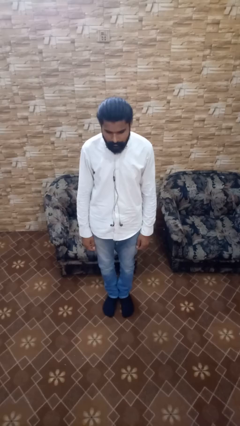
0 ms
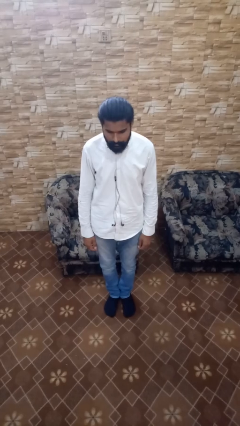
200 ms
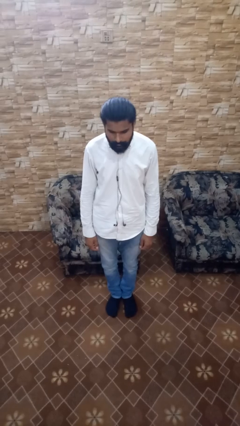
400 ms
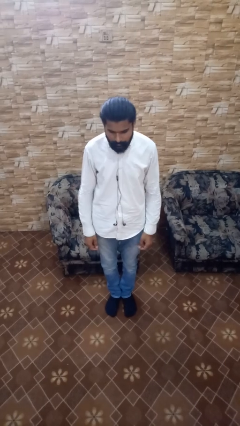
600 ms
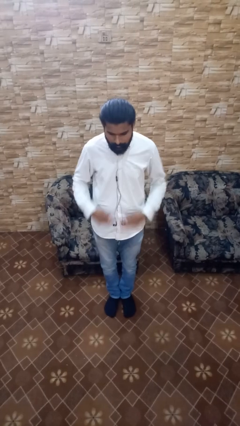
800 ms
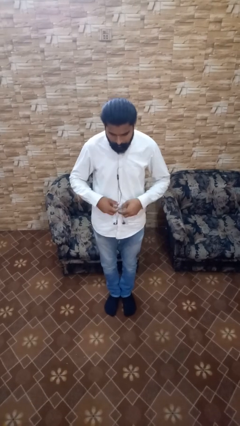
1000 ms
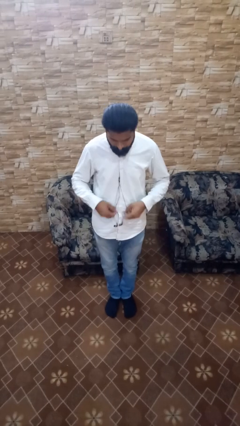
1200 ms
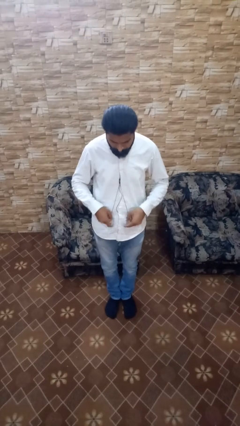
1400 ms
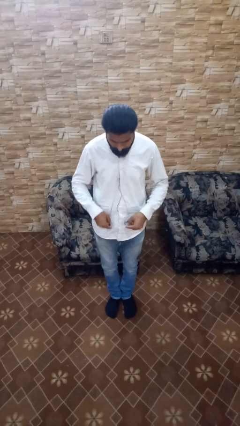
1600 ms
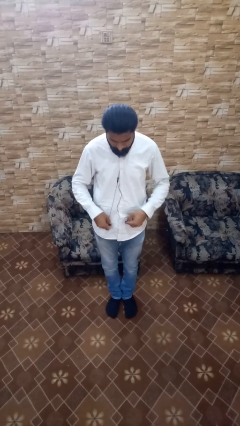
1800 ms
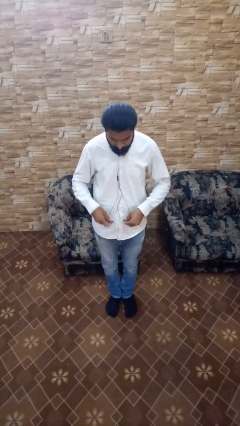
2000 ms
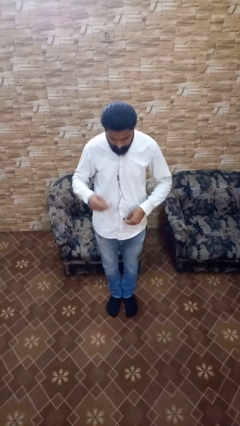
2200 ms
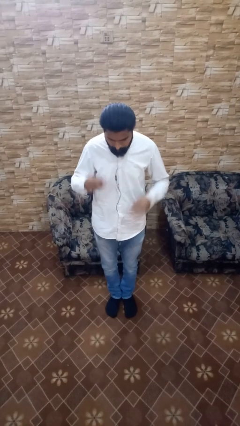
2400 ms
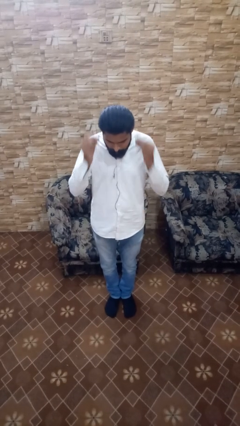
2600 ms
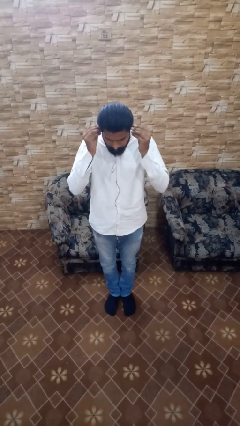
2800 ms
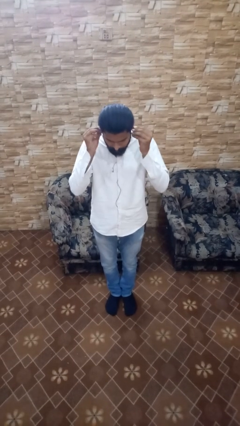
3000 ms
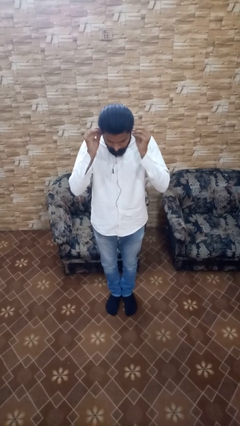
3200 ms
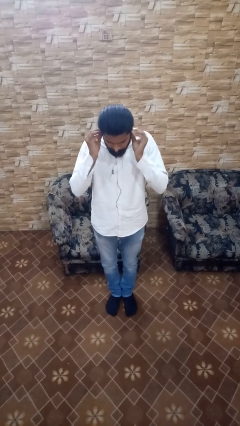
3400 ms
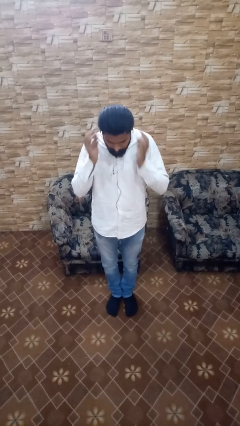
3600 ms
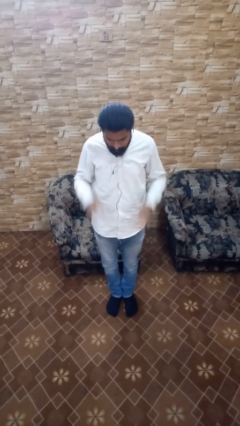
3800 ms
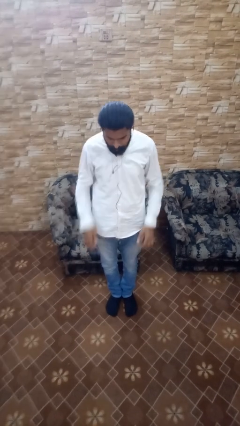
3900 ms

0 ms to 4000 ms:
person puts on headphones

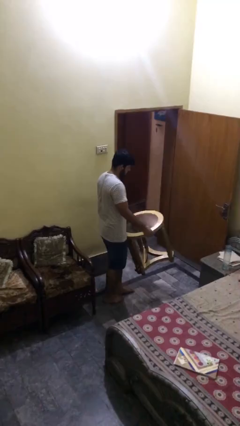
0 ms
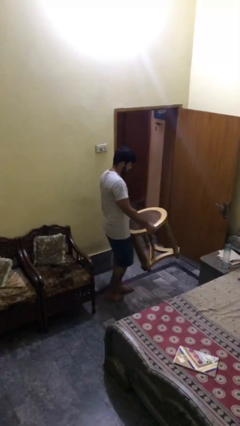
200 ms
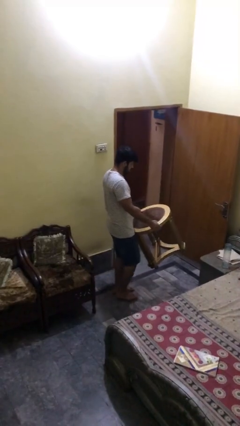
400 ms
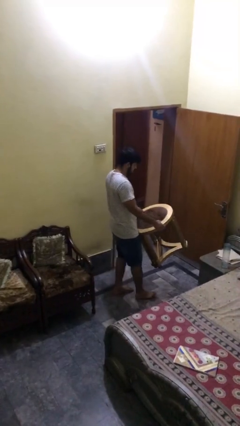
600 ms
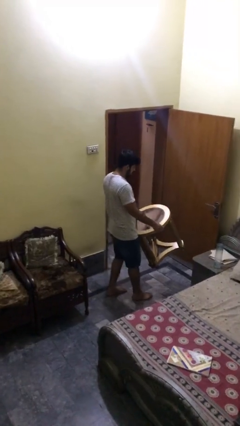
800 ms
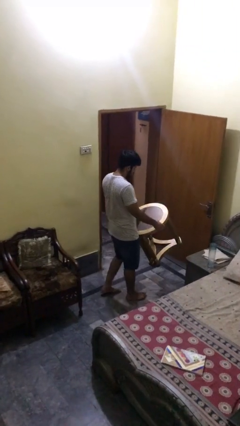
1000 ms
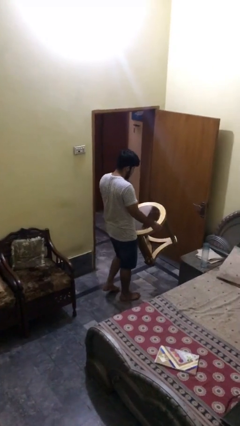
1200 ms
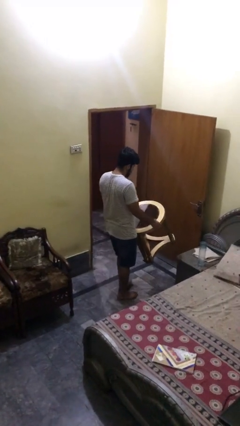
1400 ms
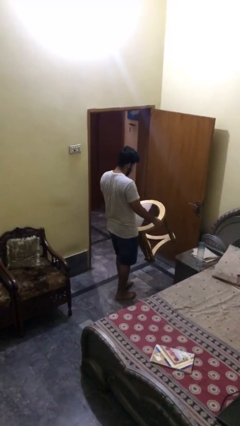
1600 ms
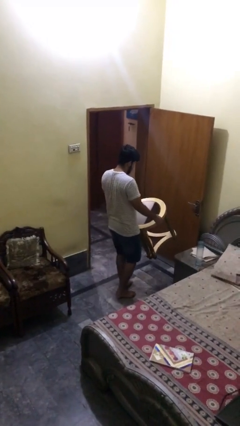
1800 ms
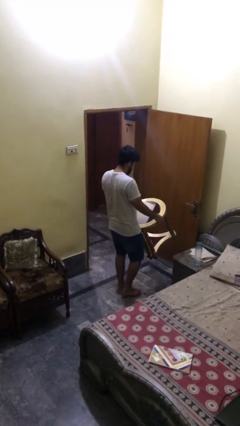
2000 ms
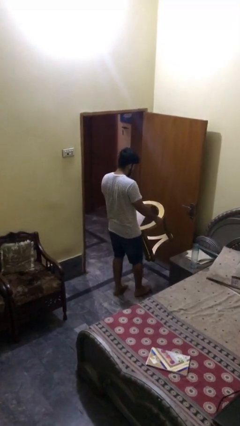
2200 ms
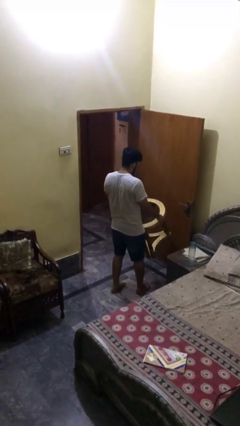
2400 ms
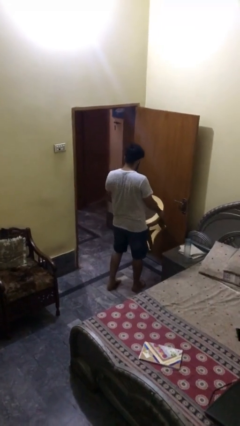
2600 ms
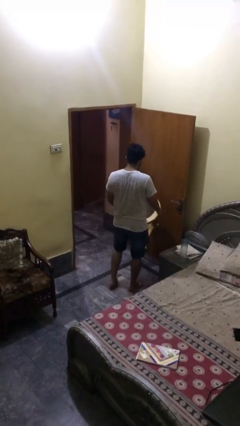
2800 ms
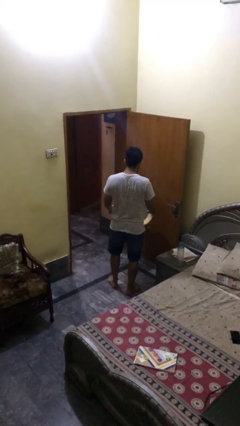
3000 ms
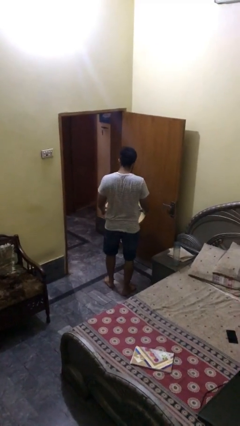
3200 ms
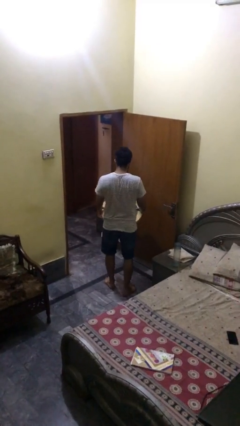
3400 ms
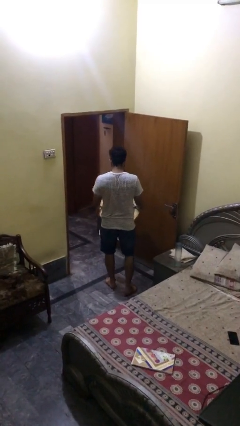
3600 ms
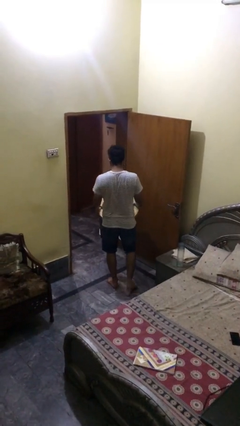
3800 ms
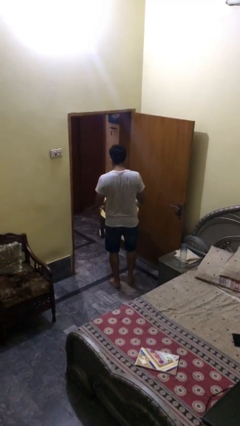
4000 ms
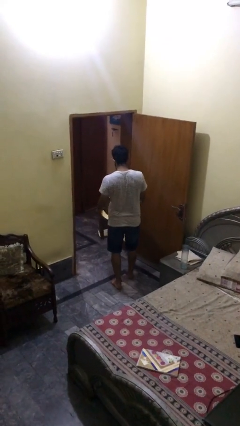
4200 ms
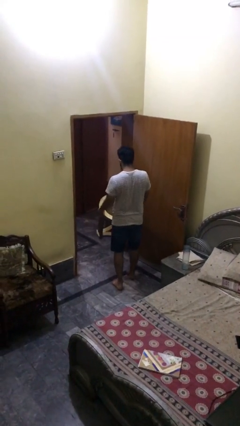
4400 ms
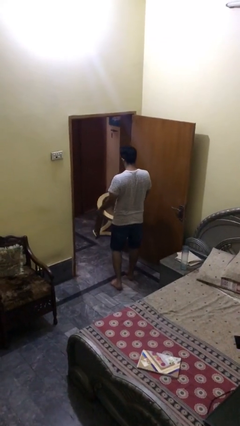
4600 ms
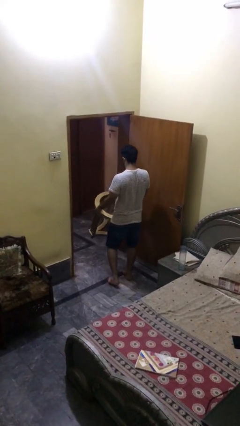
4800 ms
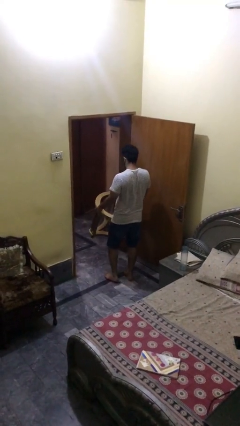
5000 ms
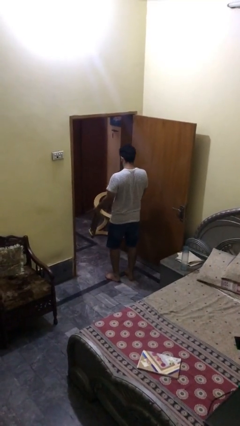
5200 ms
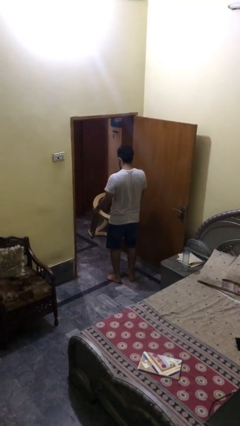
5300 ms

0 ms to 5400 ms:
person carries heavy object

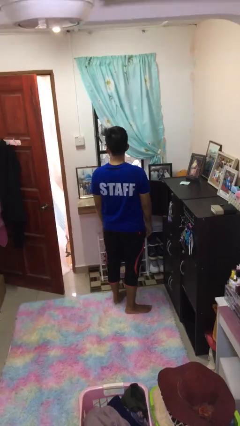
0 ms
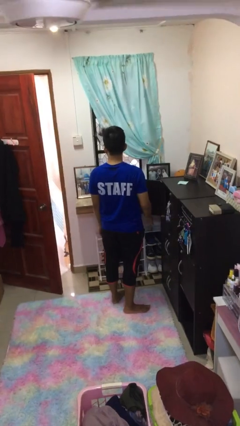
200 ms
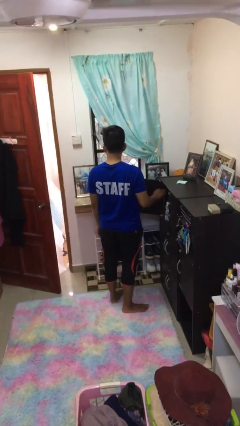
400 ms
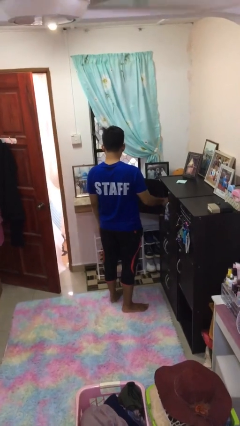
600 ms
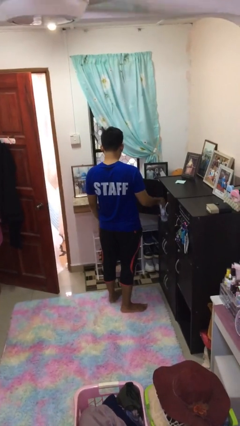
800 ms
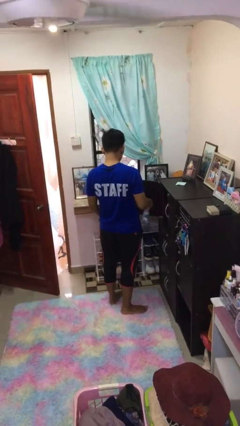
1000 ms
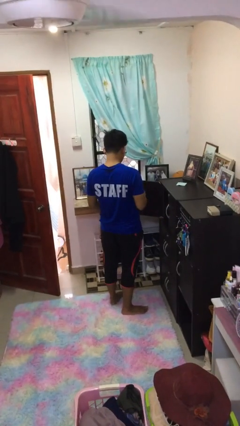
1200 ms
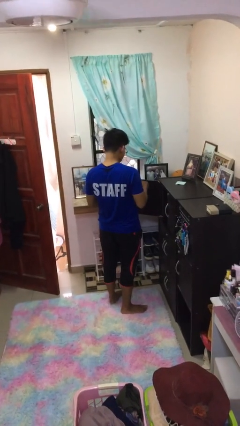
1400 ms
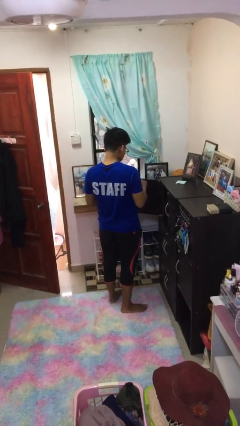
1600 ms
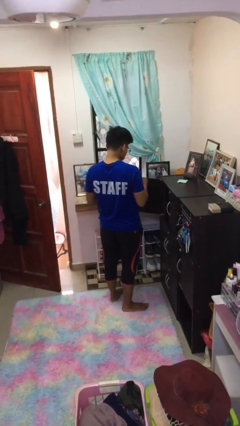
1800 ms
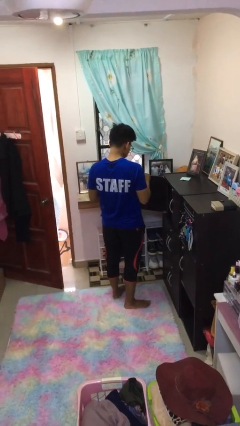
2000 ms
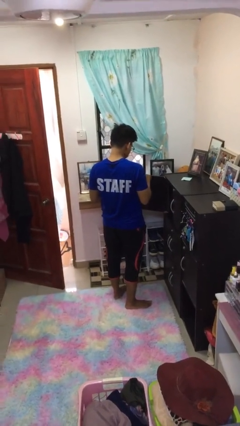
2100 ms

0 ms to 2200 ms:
person picks up object from cabinet

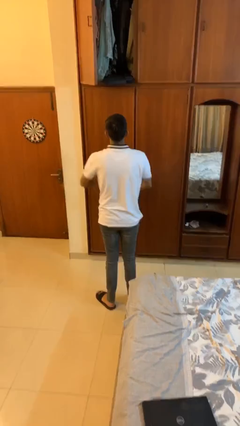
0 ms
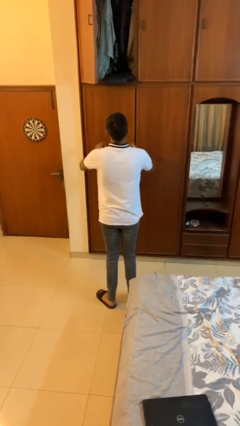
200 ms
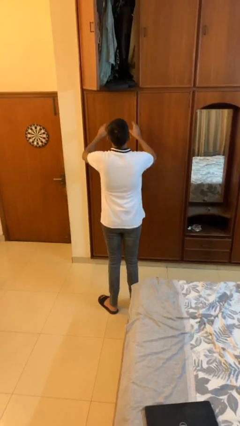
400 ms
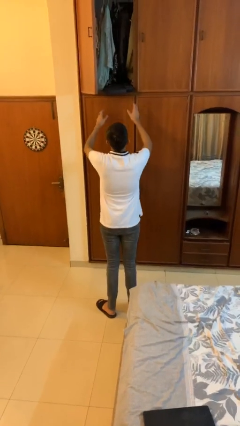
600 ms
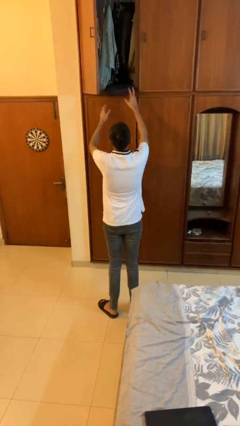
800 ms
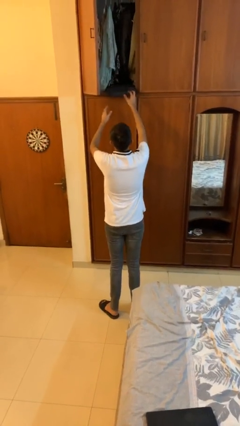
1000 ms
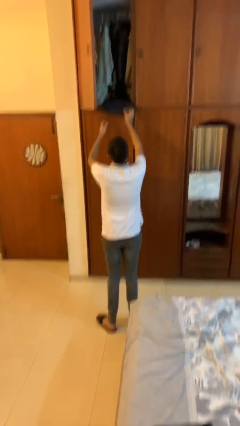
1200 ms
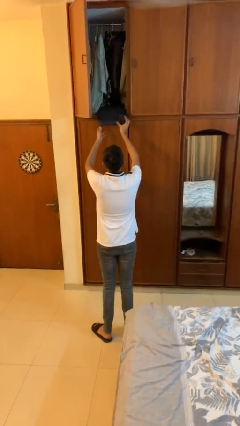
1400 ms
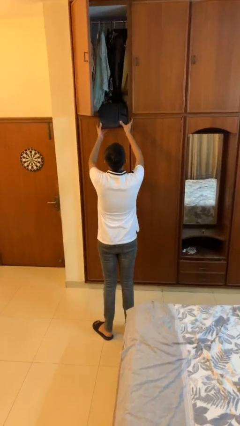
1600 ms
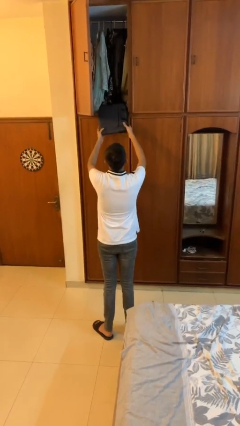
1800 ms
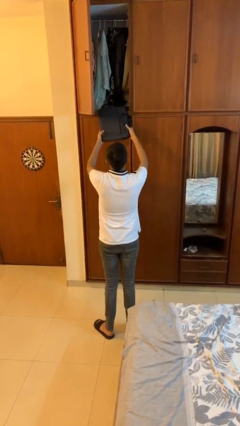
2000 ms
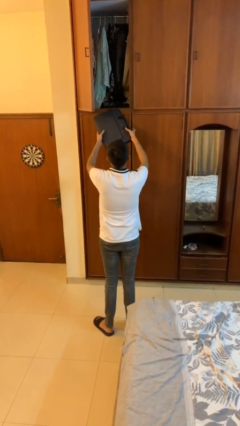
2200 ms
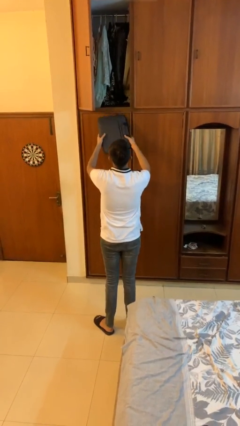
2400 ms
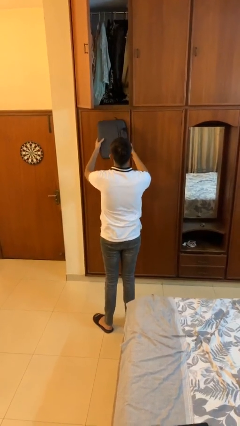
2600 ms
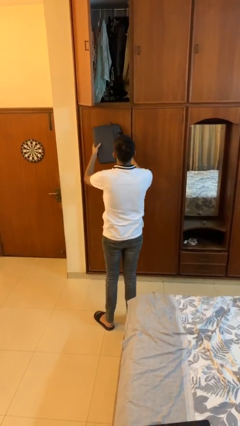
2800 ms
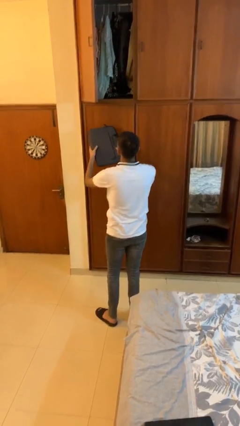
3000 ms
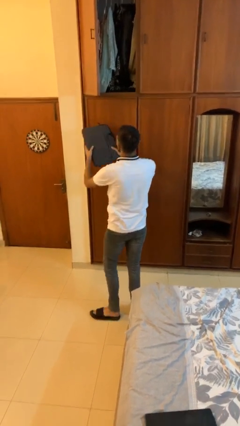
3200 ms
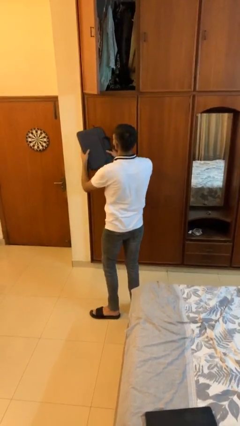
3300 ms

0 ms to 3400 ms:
person picks up object from shelf

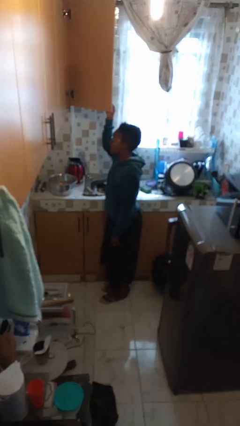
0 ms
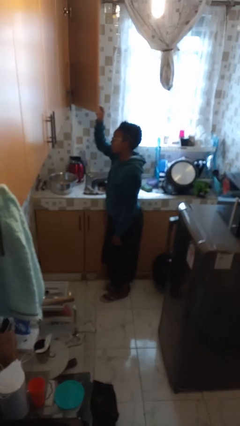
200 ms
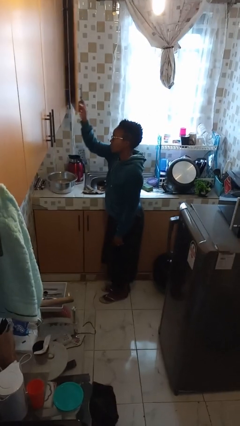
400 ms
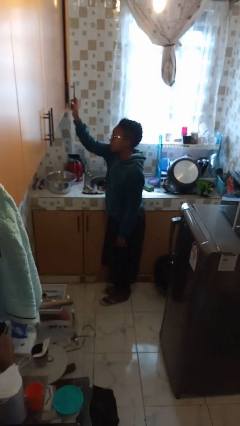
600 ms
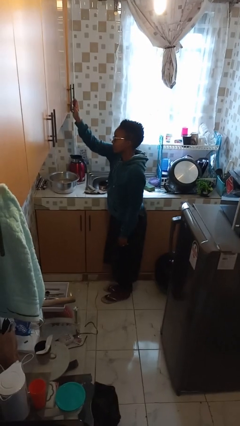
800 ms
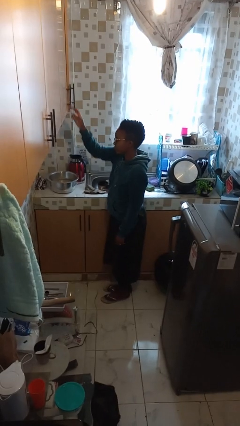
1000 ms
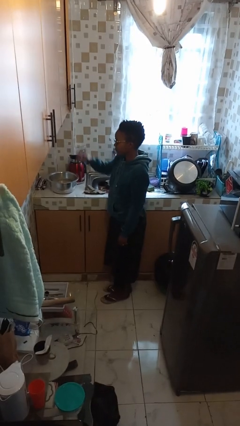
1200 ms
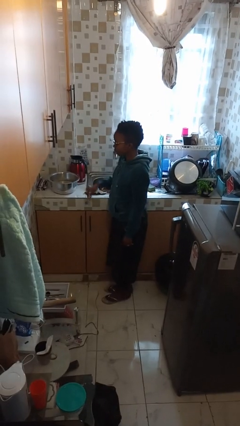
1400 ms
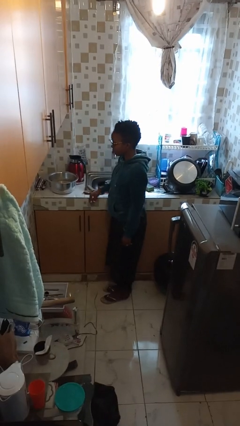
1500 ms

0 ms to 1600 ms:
person closes cabinet

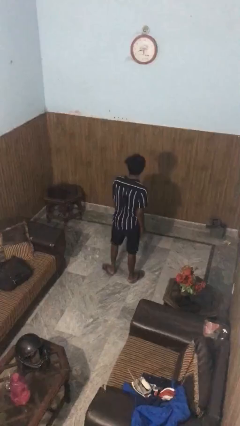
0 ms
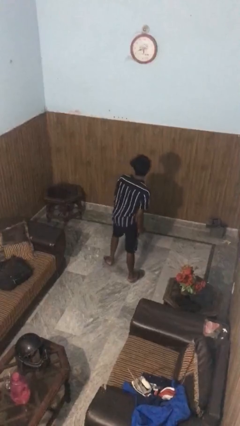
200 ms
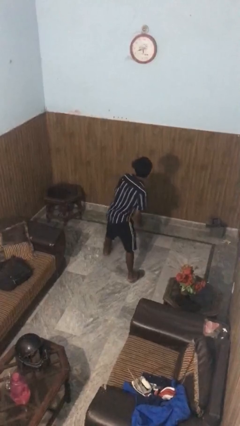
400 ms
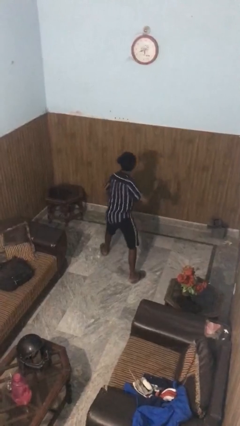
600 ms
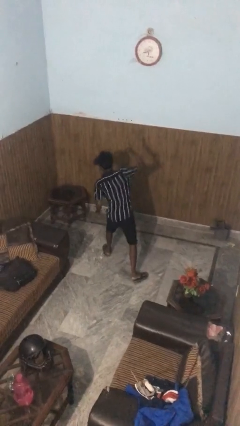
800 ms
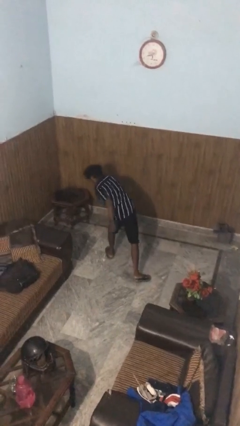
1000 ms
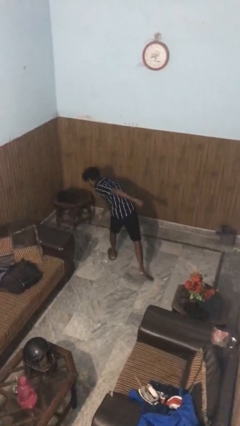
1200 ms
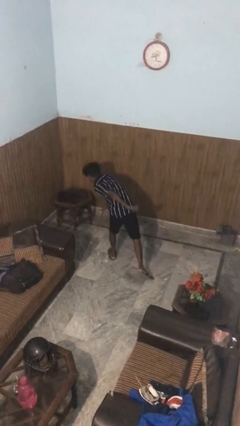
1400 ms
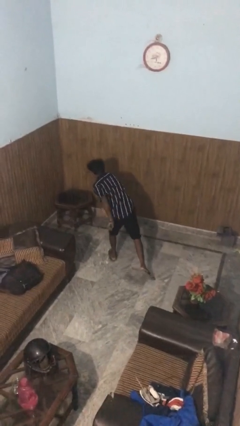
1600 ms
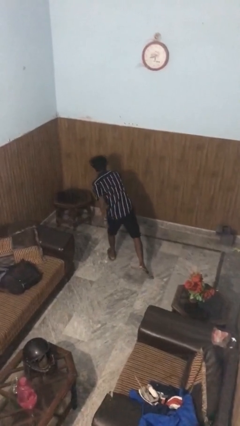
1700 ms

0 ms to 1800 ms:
person karate chop
